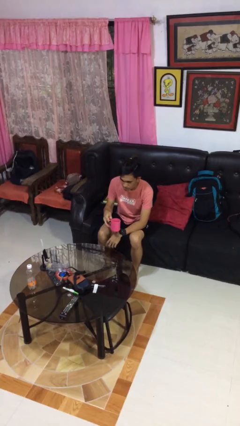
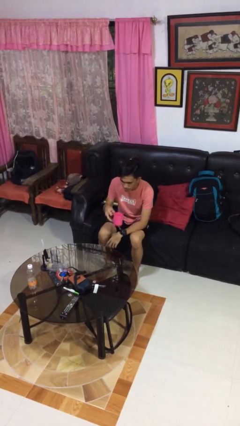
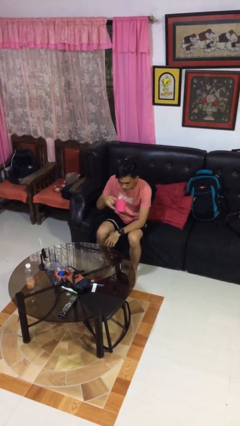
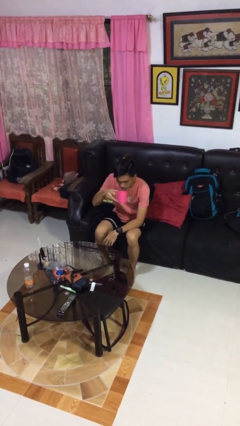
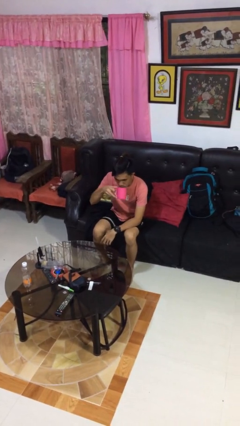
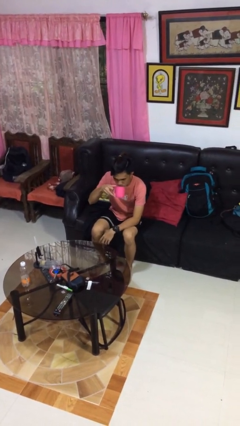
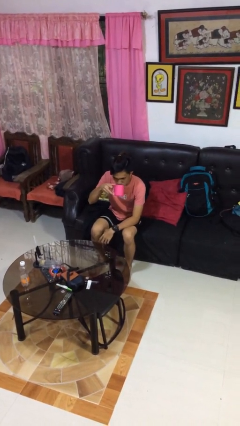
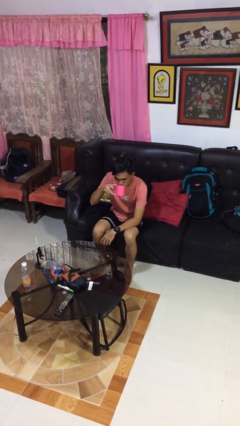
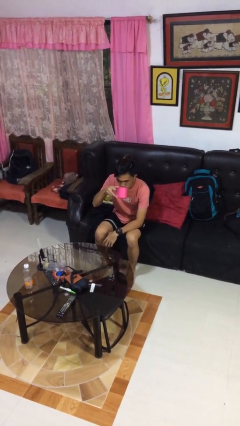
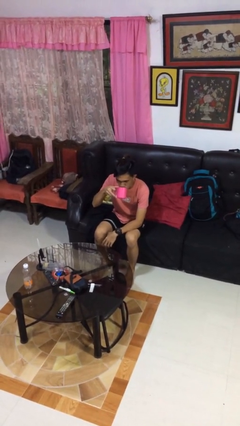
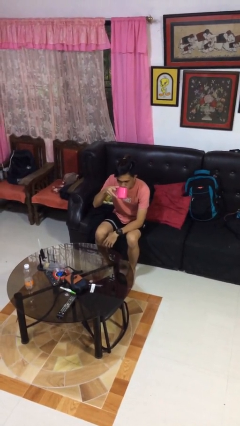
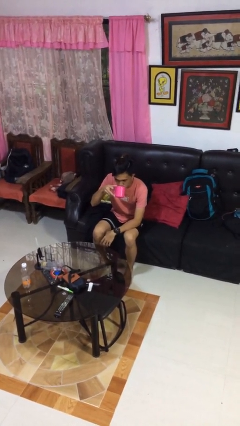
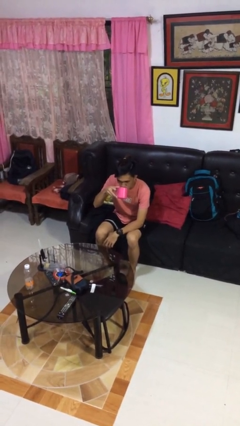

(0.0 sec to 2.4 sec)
person drinks from mug

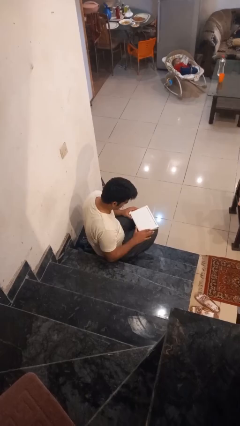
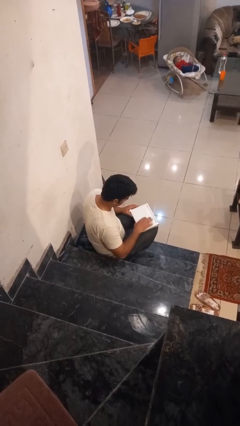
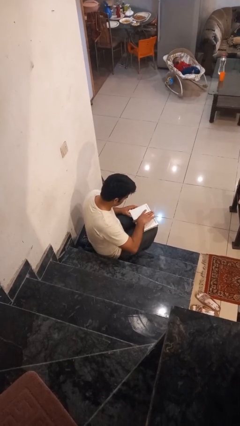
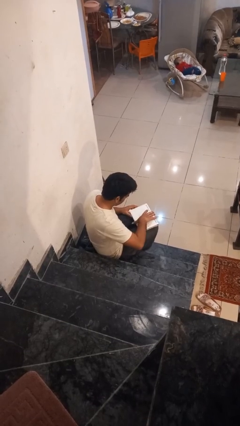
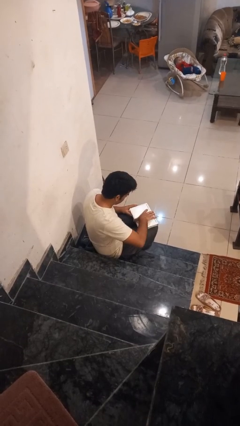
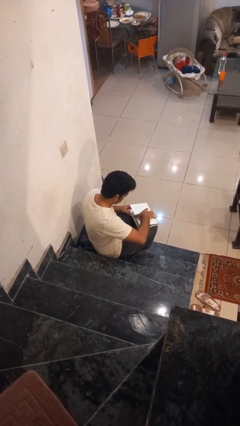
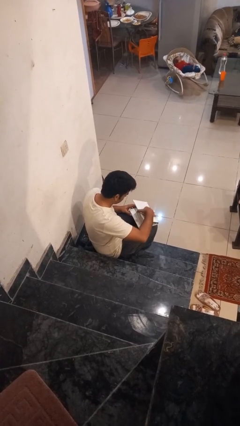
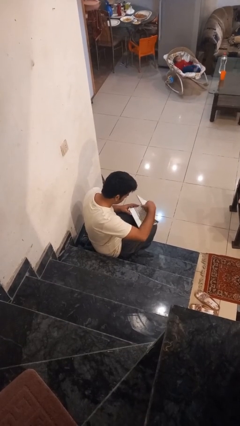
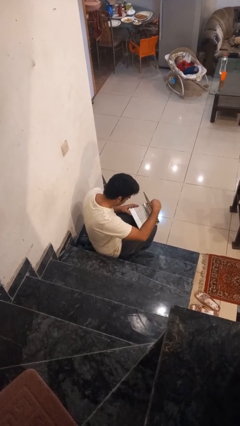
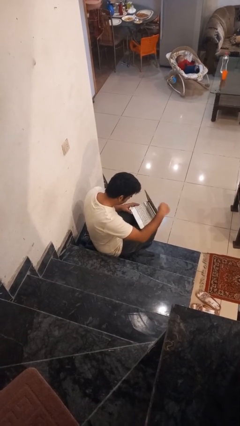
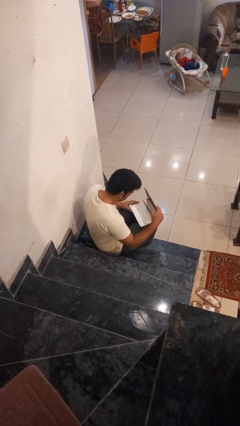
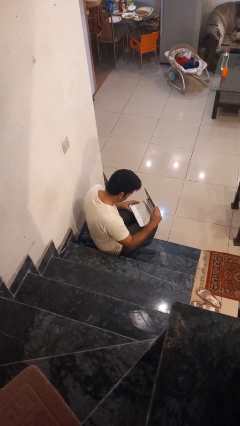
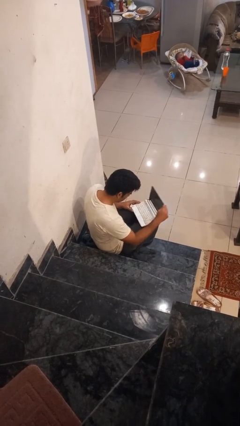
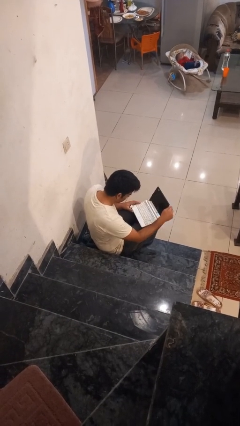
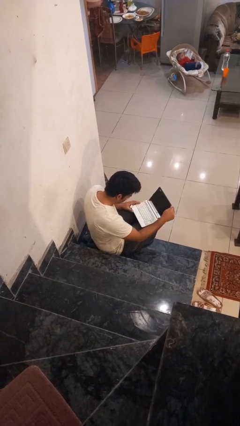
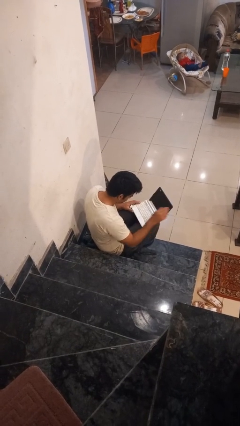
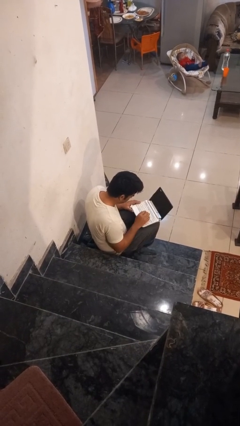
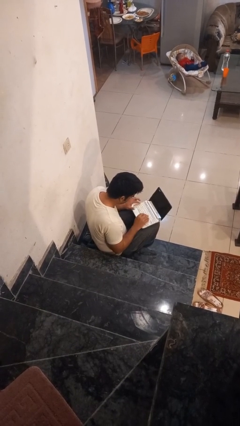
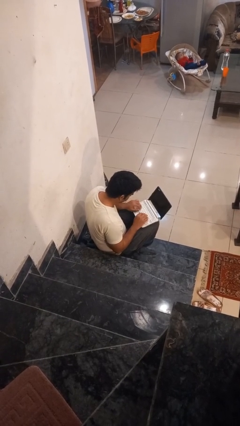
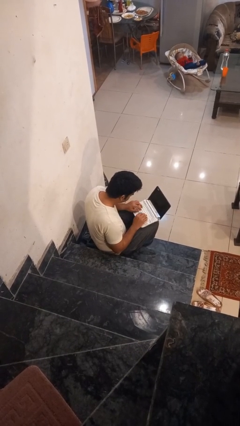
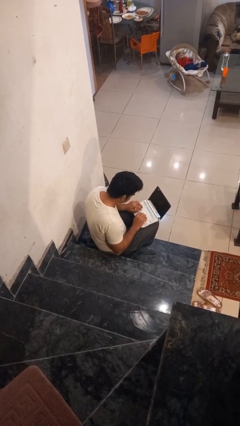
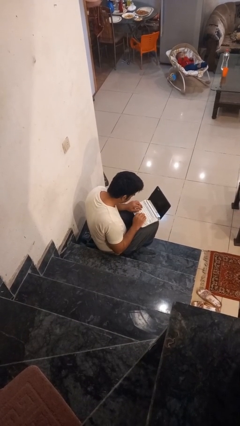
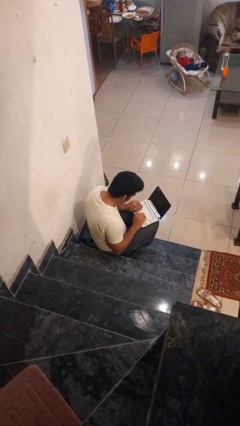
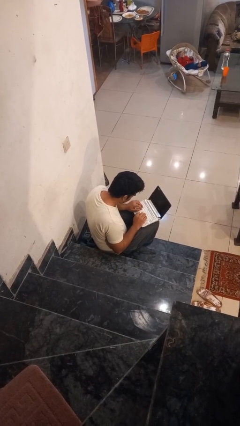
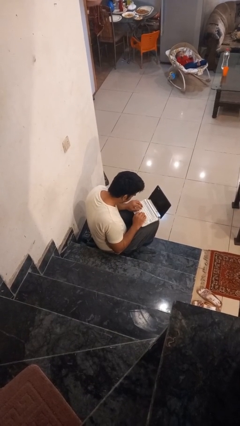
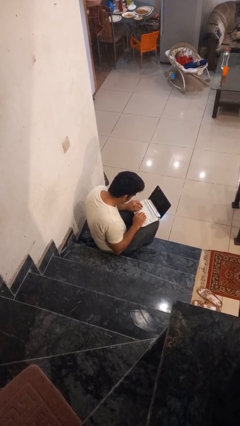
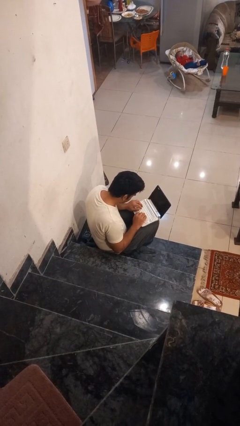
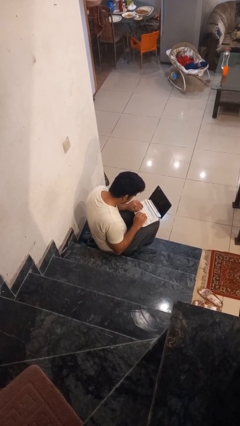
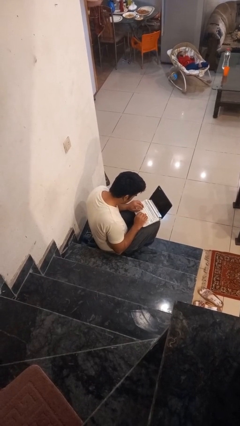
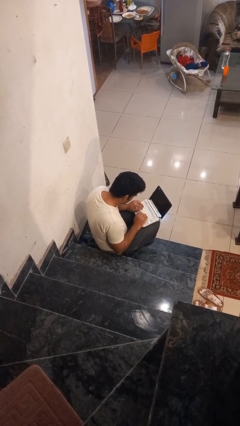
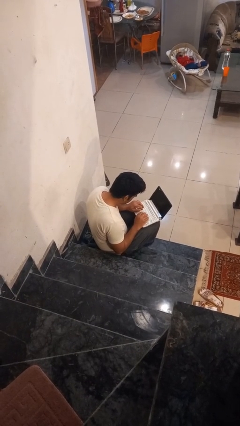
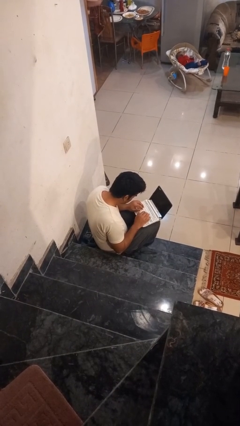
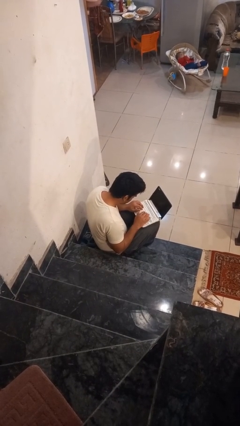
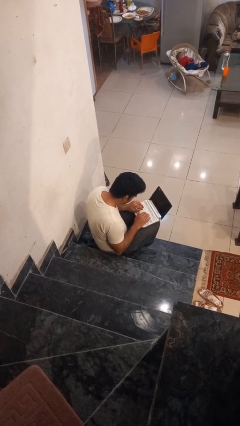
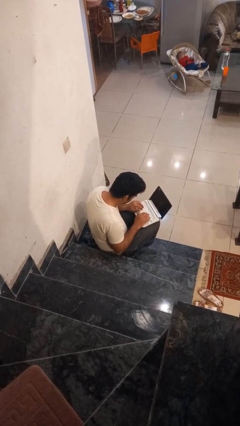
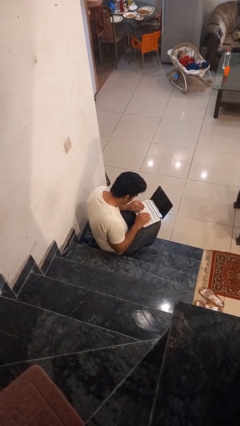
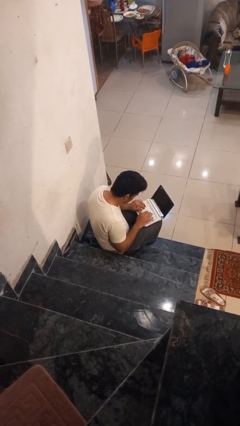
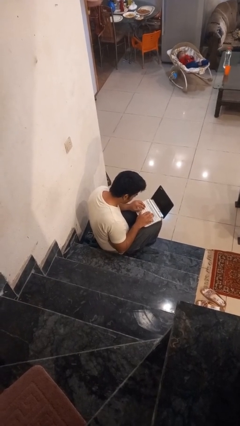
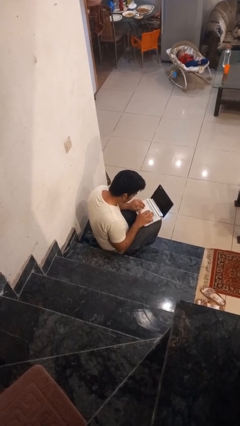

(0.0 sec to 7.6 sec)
person interacts with laptop

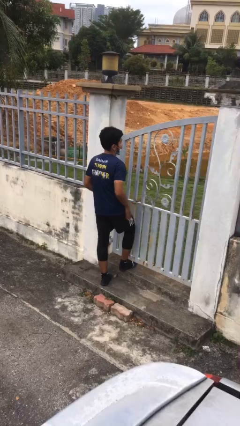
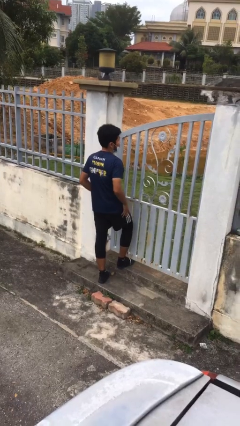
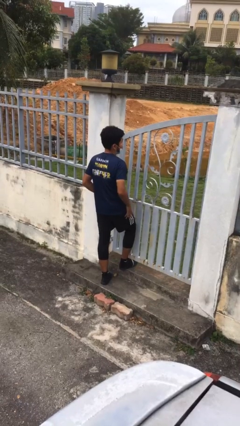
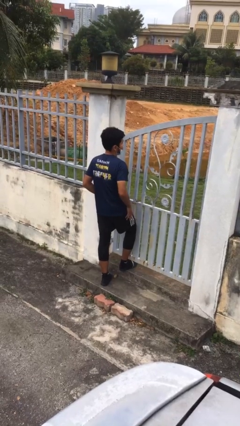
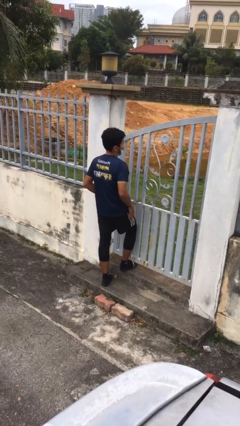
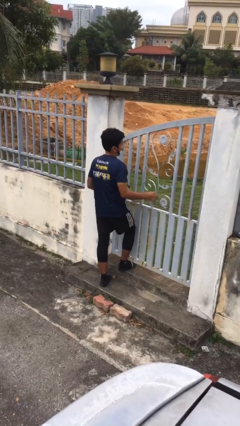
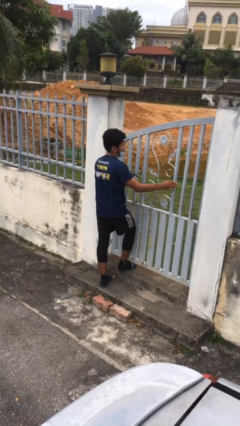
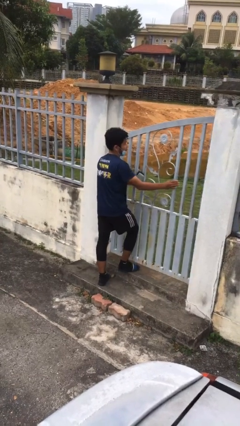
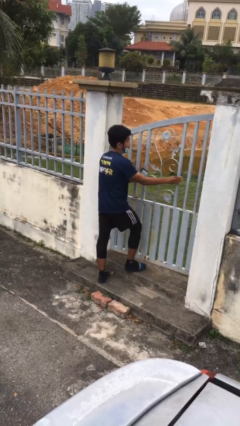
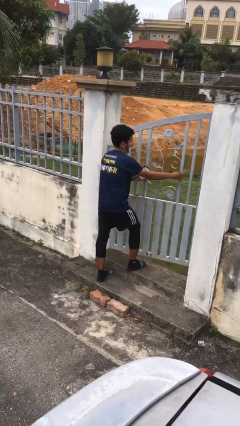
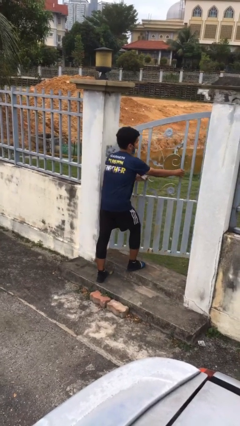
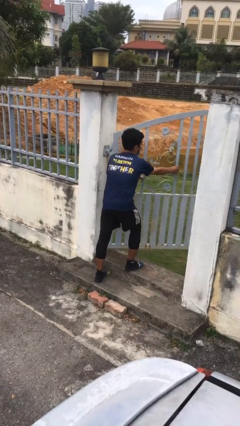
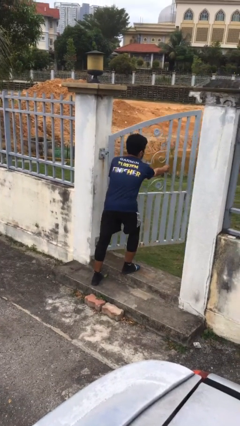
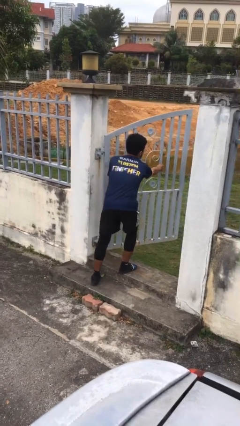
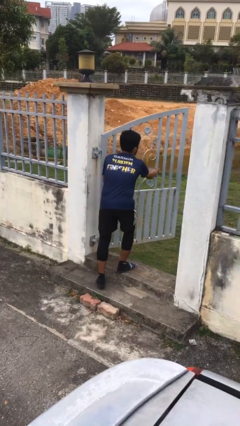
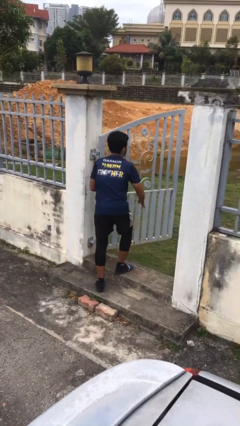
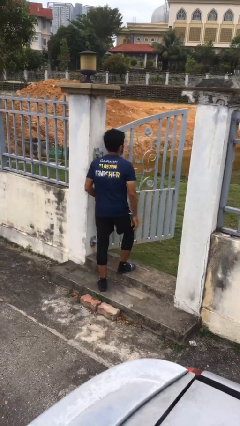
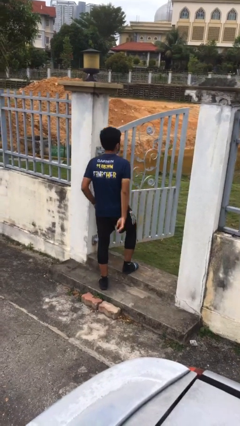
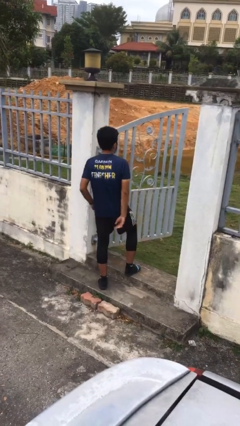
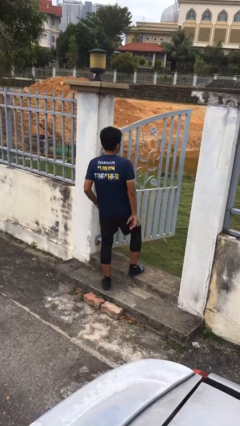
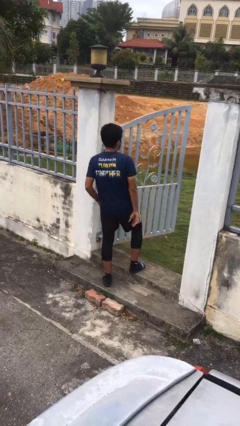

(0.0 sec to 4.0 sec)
person opens facility door

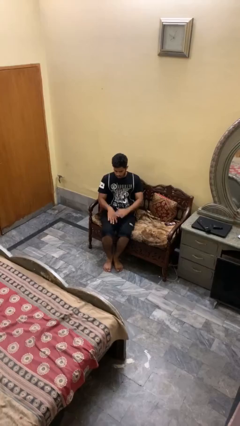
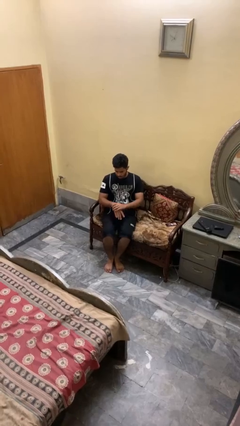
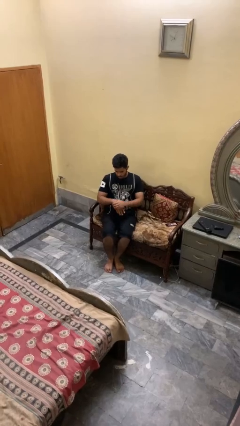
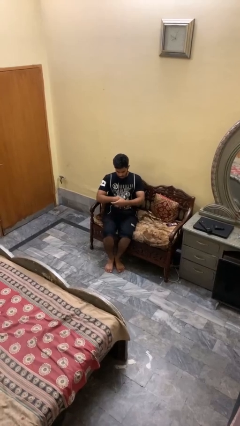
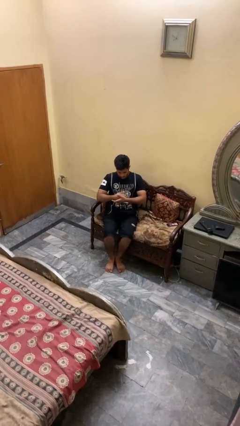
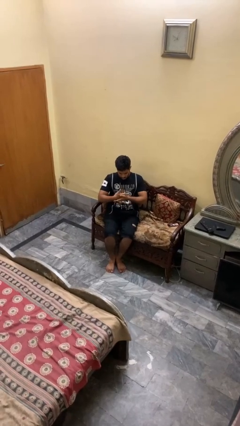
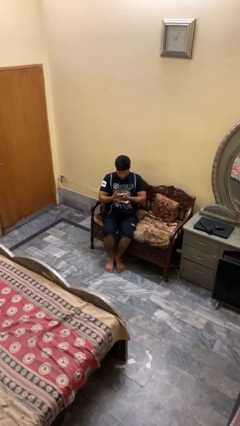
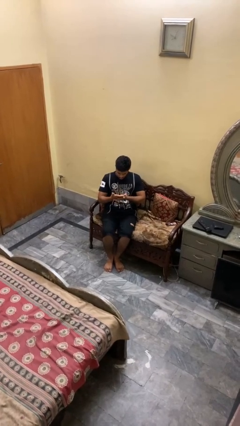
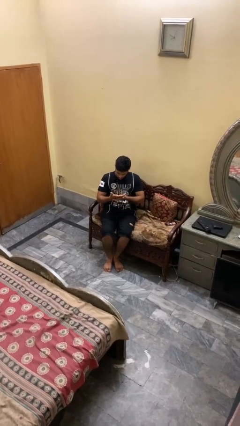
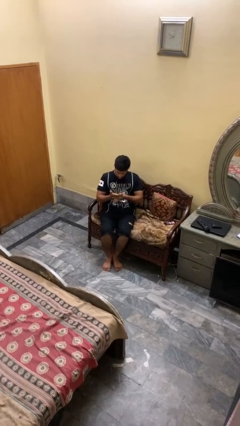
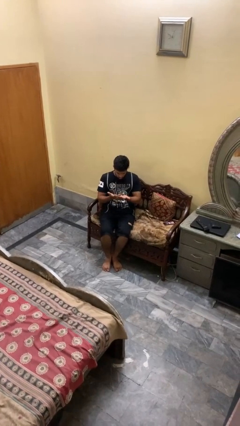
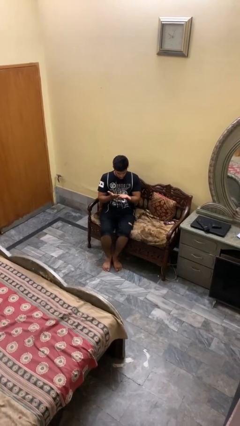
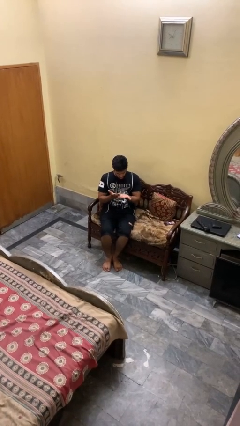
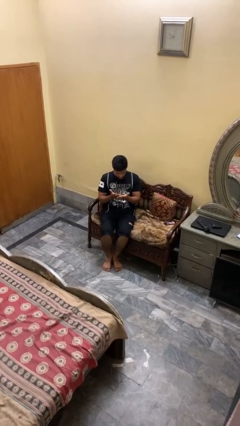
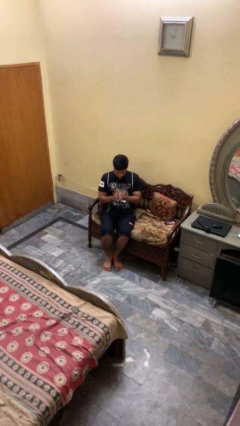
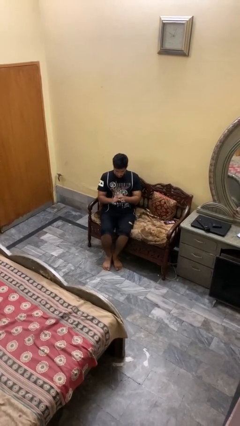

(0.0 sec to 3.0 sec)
person looks at hands in lap

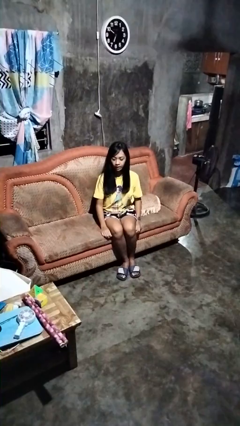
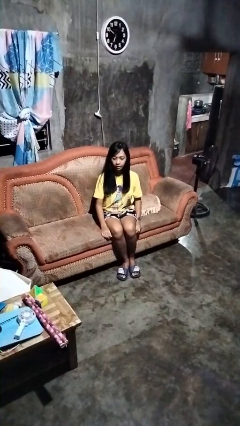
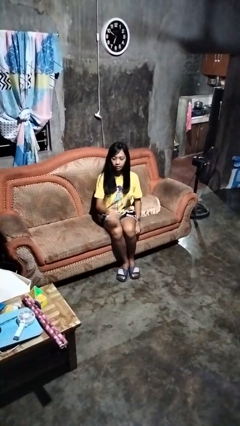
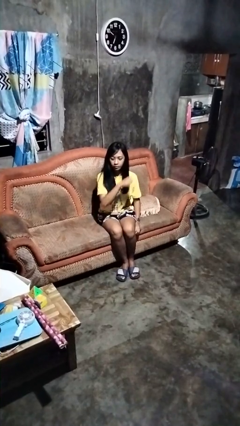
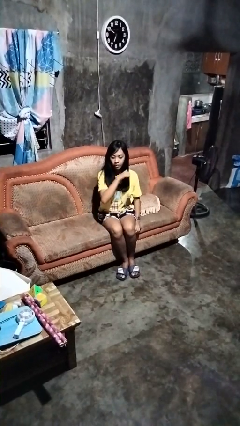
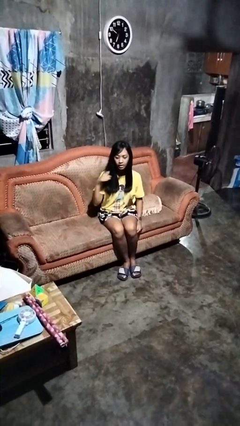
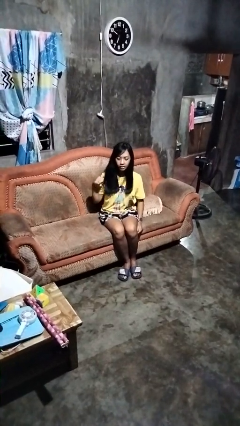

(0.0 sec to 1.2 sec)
person gestures cut
